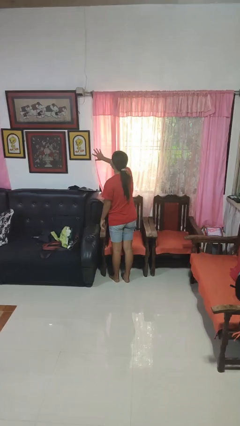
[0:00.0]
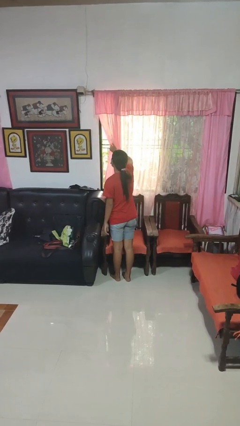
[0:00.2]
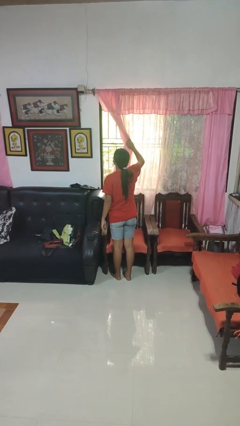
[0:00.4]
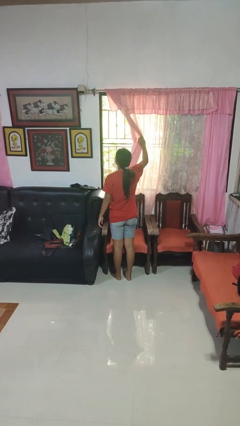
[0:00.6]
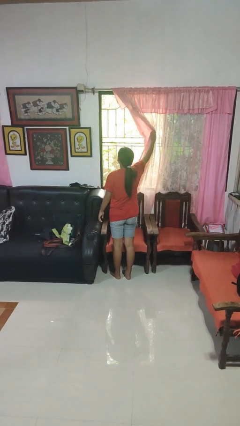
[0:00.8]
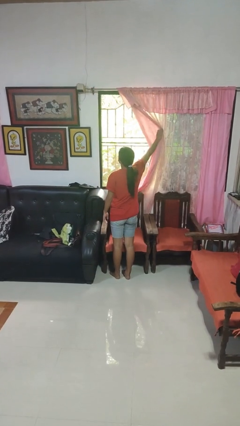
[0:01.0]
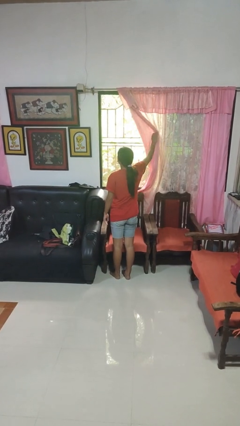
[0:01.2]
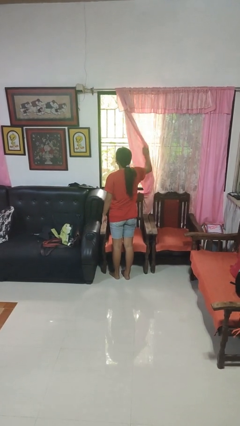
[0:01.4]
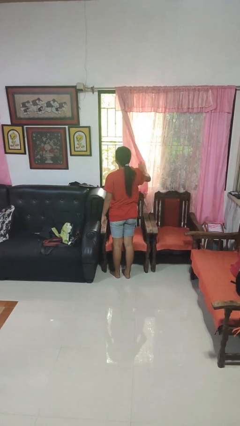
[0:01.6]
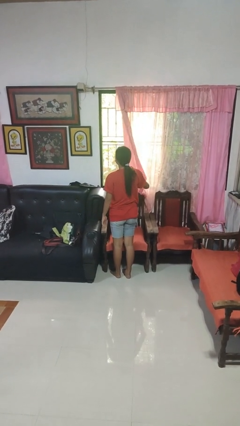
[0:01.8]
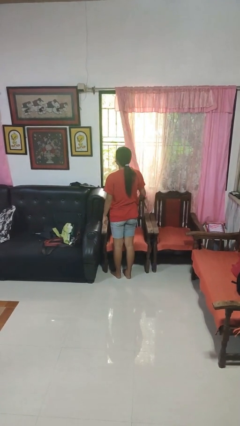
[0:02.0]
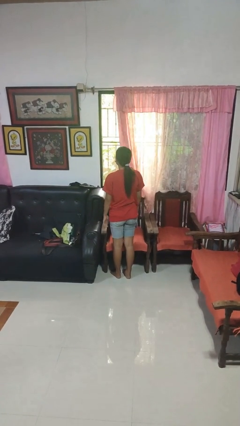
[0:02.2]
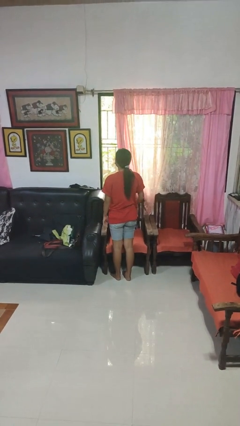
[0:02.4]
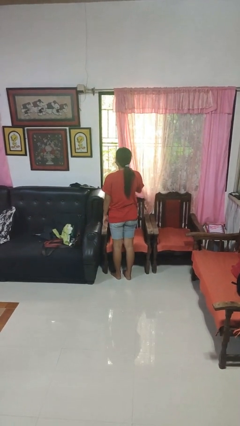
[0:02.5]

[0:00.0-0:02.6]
person opens curtains

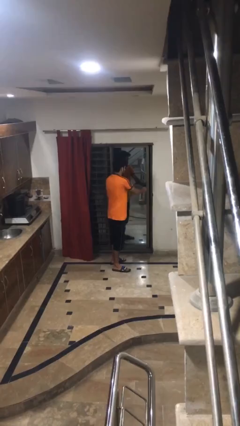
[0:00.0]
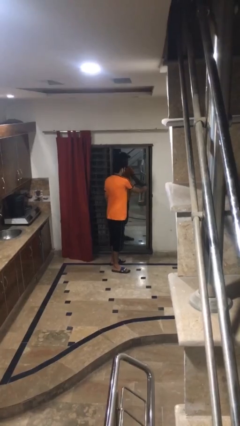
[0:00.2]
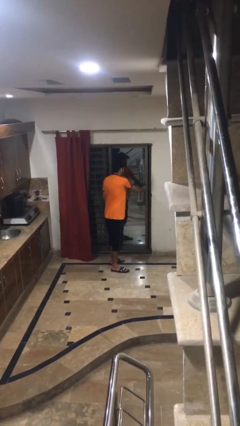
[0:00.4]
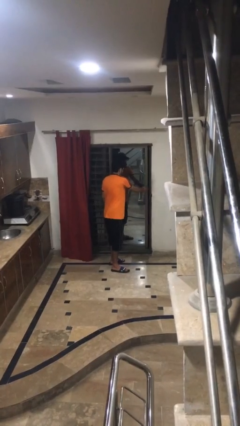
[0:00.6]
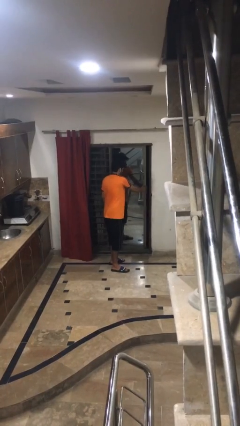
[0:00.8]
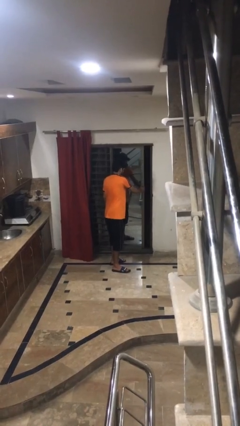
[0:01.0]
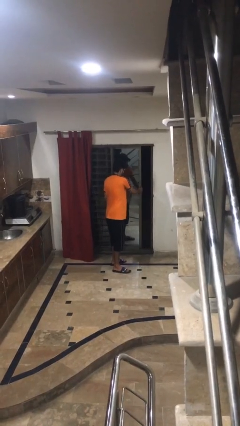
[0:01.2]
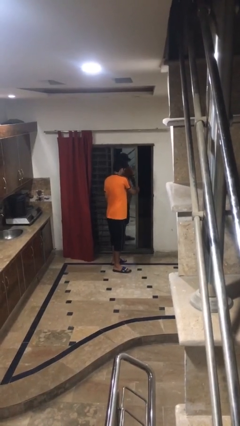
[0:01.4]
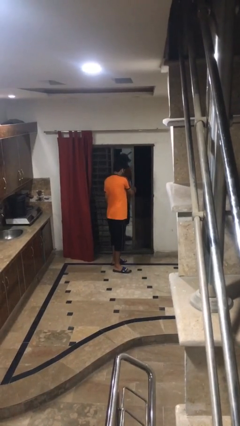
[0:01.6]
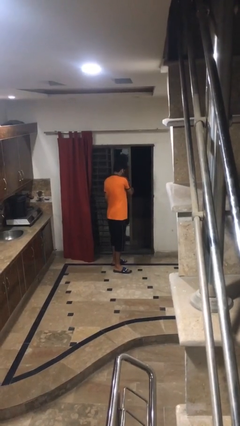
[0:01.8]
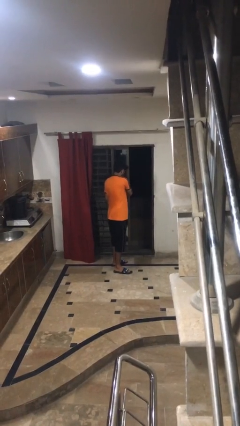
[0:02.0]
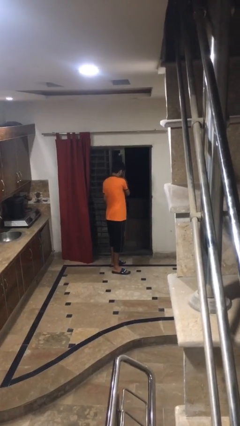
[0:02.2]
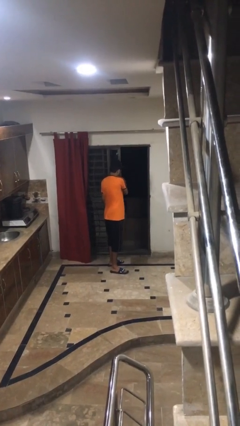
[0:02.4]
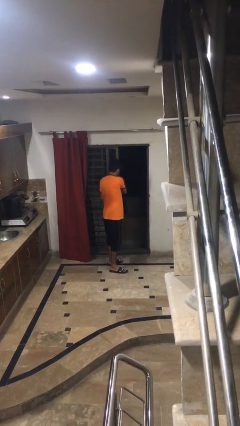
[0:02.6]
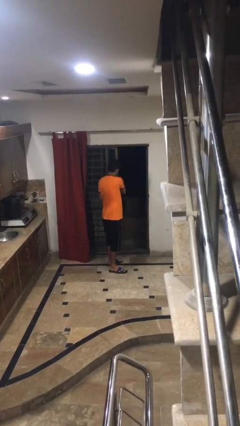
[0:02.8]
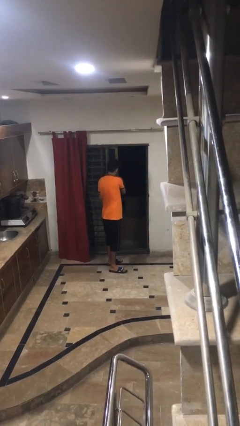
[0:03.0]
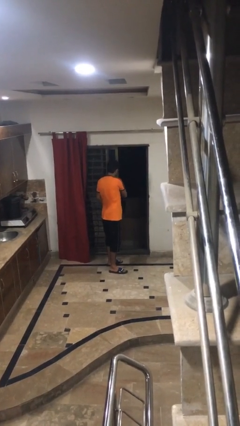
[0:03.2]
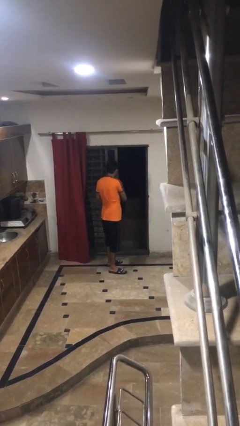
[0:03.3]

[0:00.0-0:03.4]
person opens sliding door

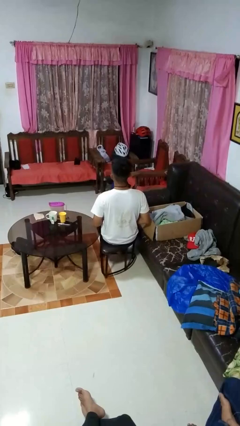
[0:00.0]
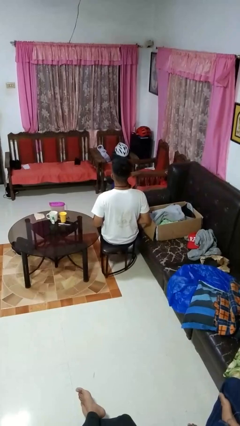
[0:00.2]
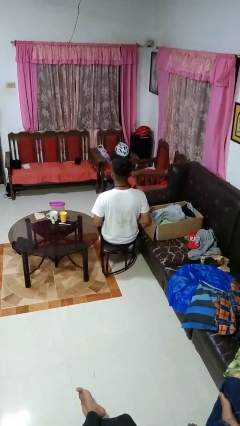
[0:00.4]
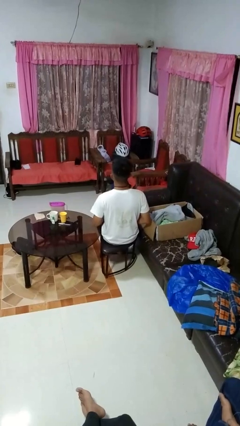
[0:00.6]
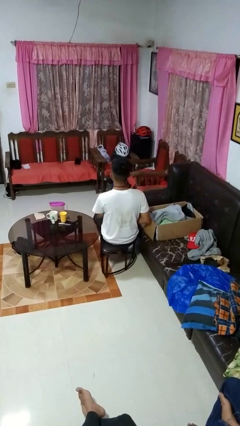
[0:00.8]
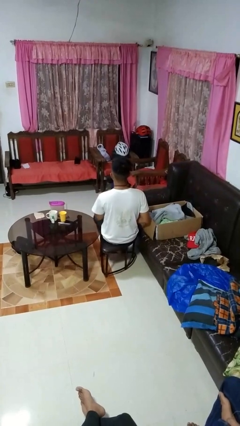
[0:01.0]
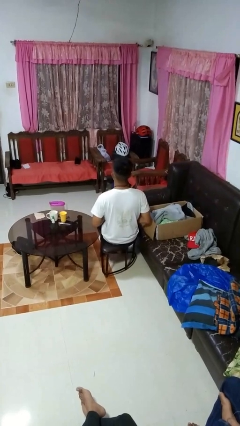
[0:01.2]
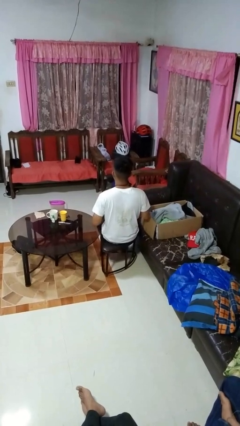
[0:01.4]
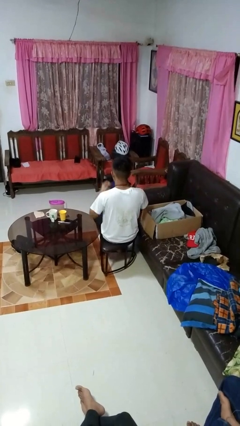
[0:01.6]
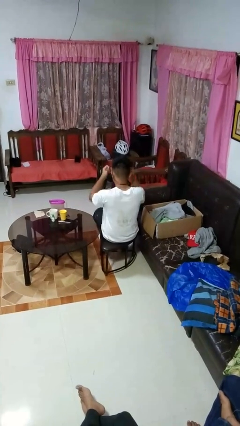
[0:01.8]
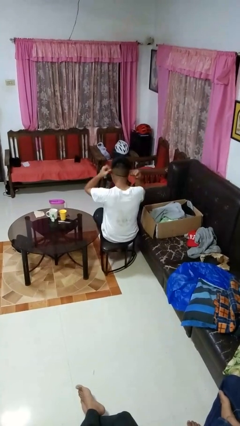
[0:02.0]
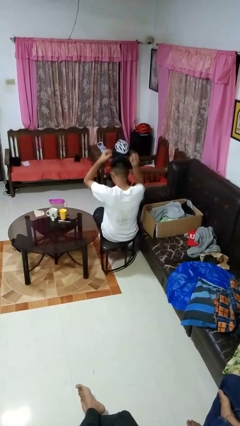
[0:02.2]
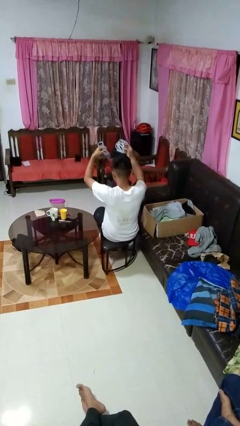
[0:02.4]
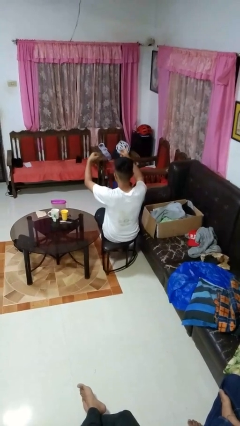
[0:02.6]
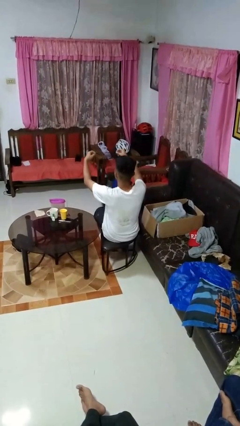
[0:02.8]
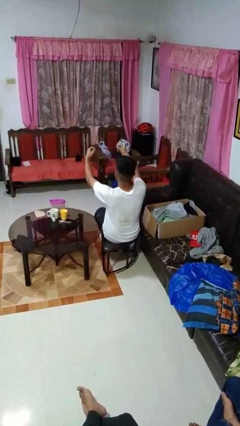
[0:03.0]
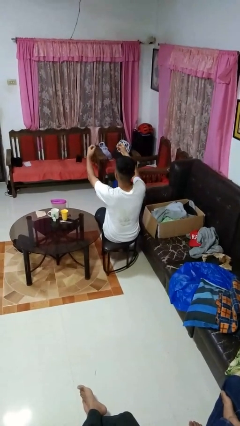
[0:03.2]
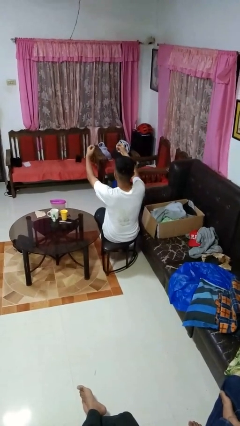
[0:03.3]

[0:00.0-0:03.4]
person takes off necktie

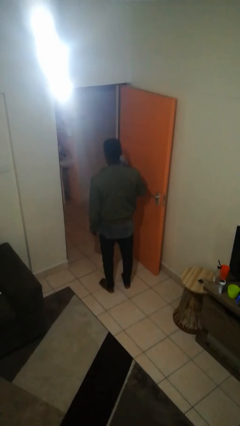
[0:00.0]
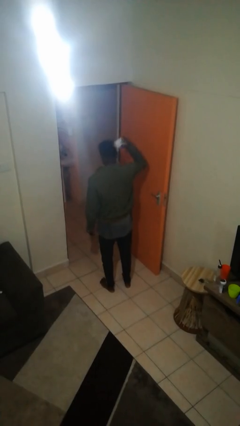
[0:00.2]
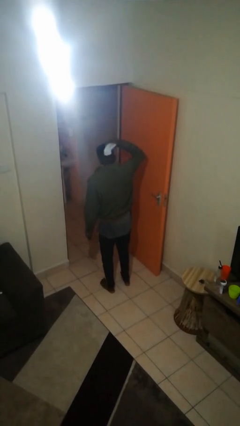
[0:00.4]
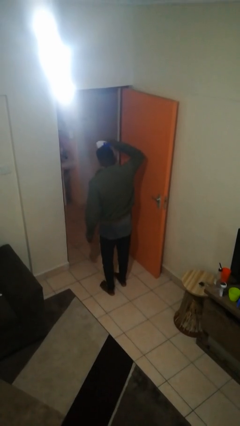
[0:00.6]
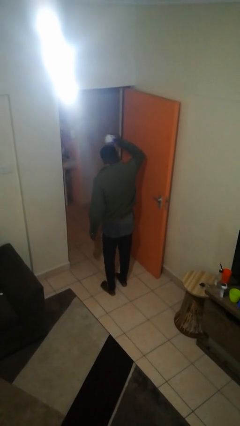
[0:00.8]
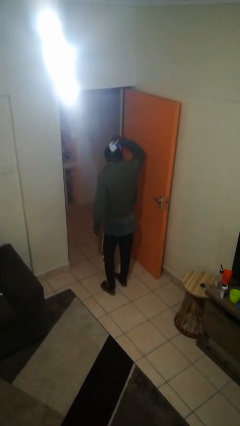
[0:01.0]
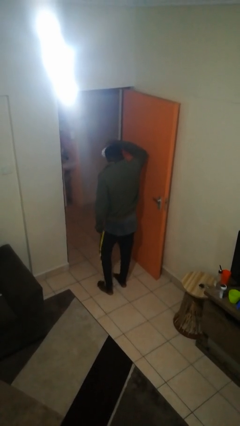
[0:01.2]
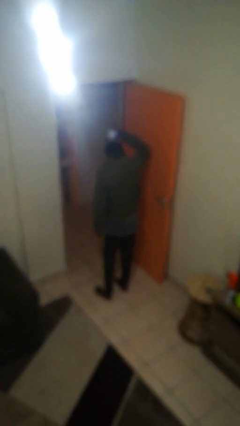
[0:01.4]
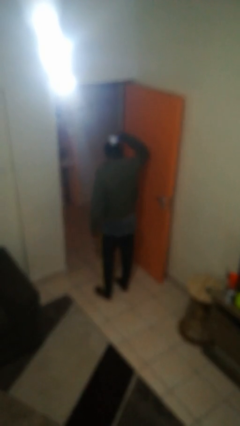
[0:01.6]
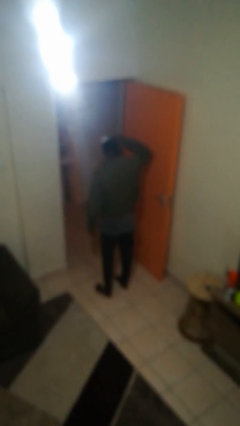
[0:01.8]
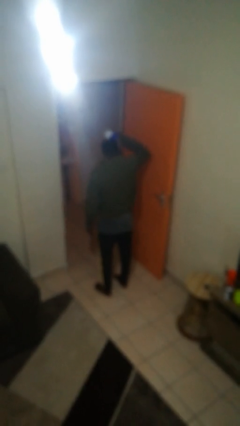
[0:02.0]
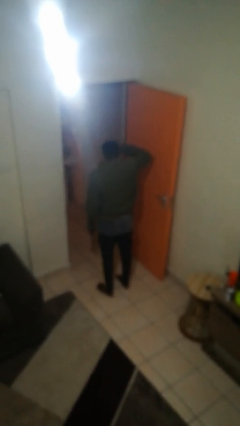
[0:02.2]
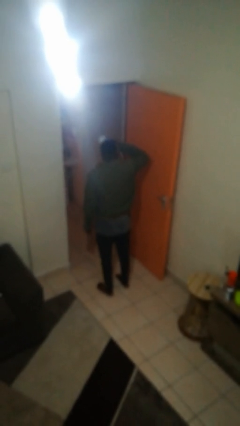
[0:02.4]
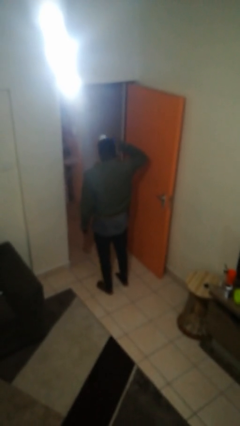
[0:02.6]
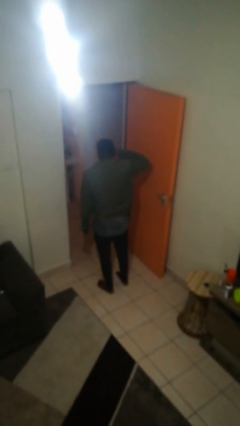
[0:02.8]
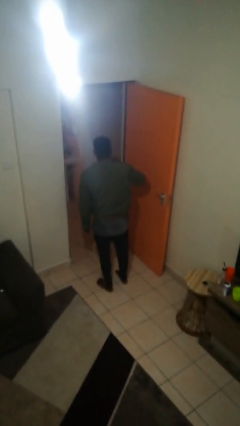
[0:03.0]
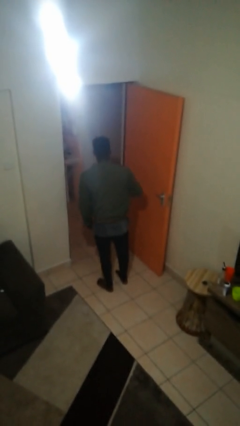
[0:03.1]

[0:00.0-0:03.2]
person brushes hair

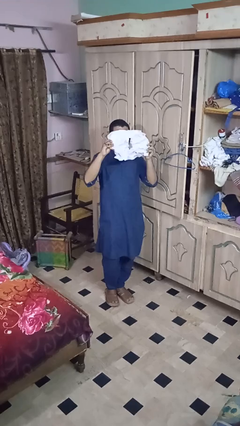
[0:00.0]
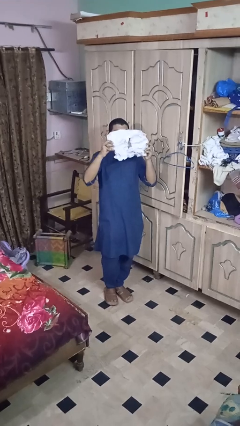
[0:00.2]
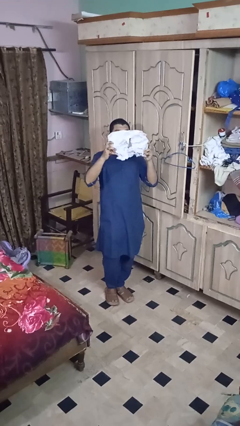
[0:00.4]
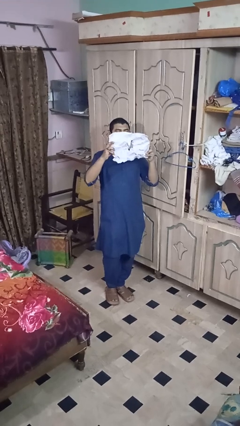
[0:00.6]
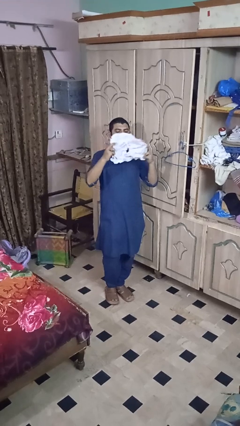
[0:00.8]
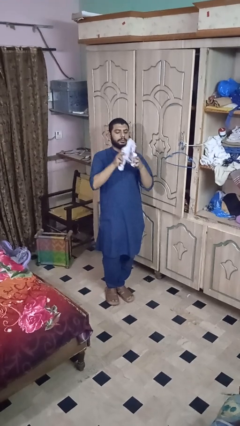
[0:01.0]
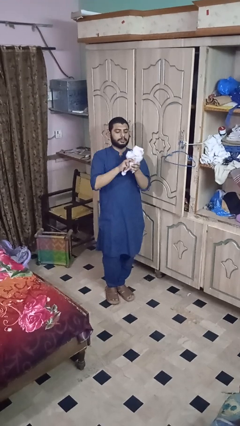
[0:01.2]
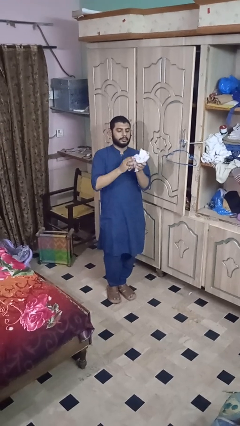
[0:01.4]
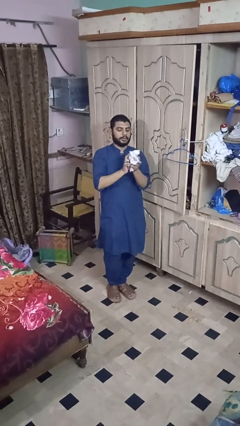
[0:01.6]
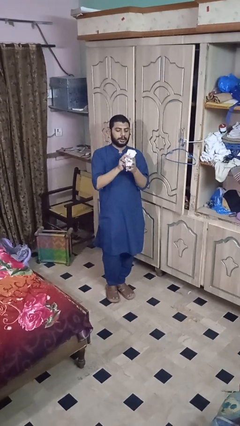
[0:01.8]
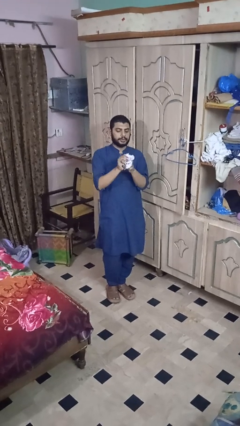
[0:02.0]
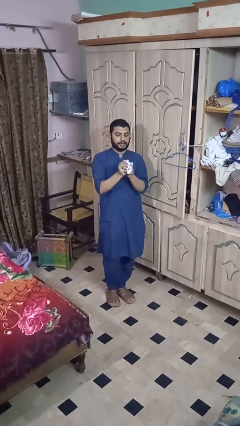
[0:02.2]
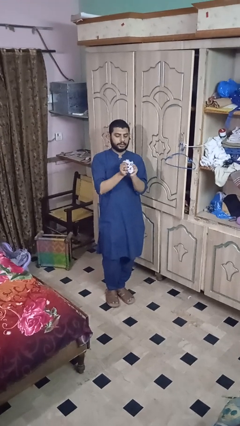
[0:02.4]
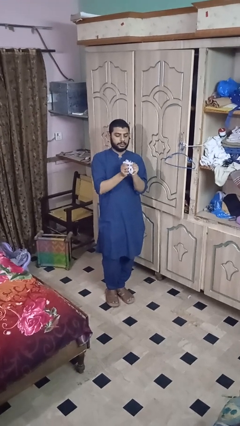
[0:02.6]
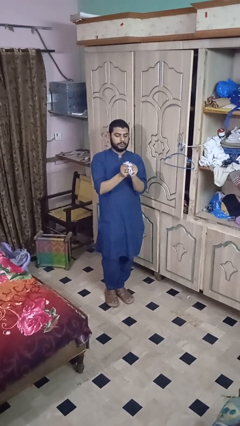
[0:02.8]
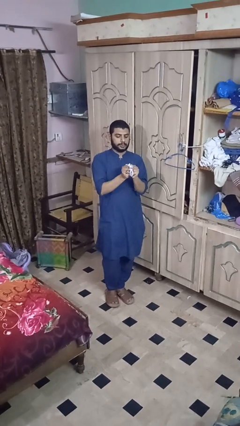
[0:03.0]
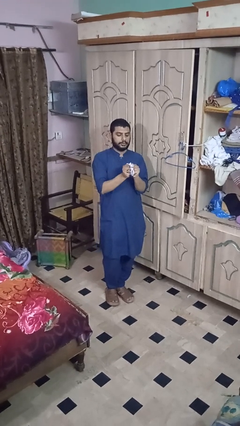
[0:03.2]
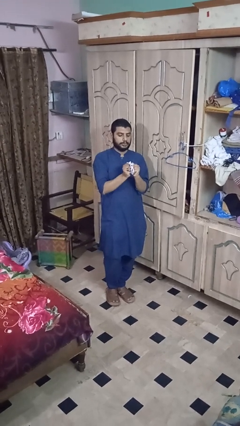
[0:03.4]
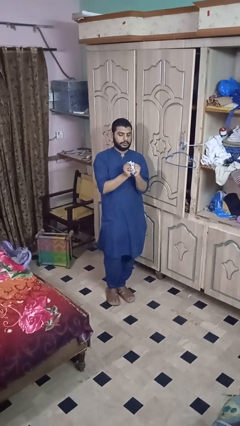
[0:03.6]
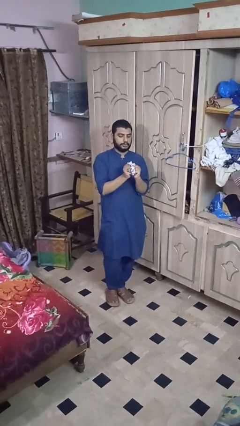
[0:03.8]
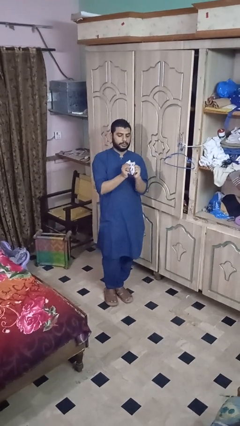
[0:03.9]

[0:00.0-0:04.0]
person crumples paper

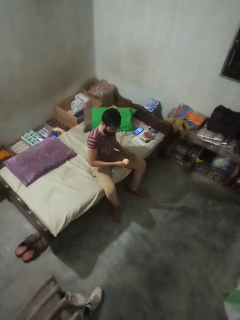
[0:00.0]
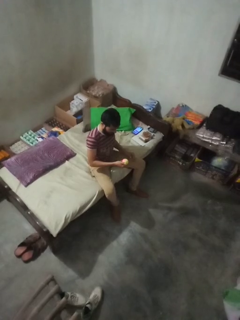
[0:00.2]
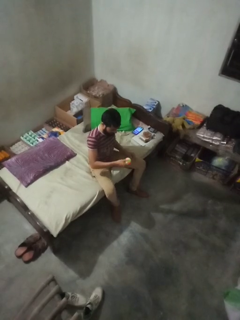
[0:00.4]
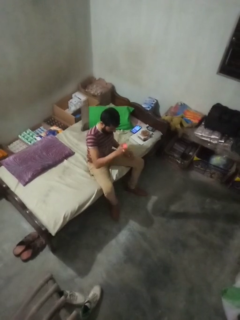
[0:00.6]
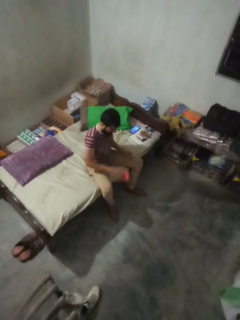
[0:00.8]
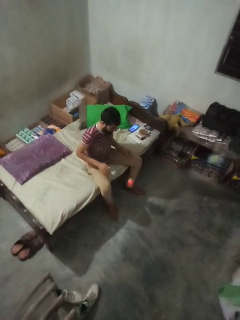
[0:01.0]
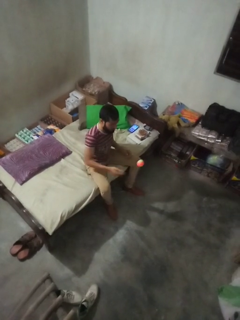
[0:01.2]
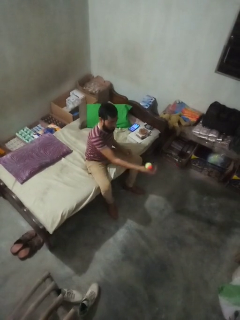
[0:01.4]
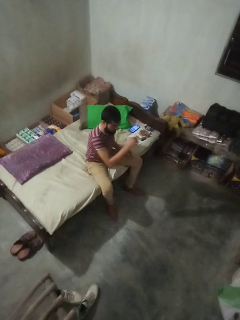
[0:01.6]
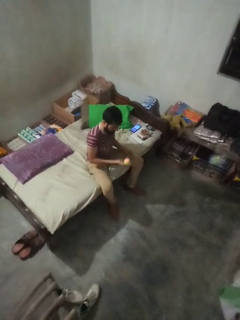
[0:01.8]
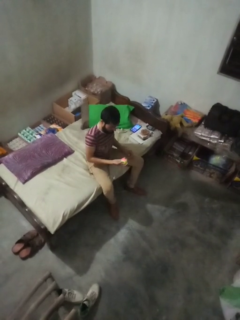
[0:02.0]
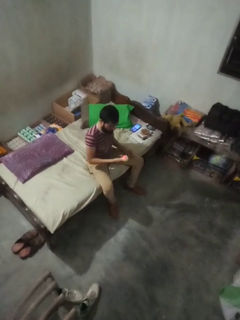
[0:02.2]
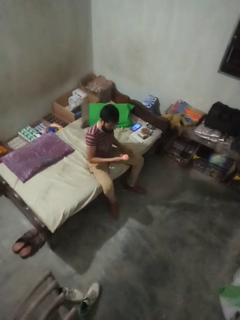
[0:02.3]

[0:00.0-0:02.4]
person bounces ball on floor
